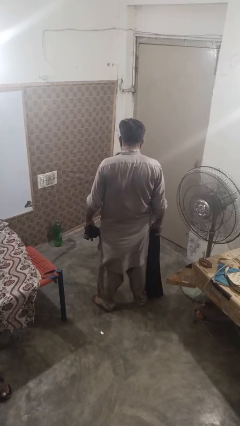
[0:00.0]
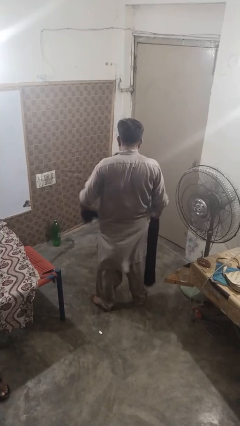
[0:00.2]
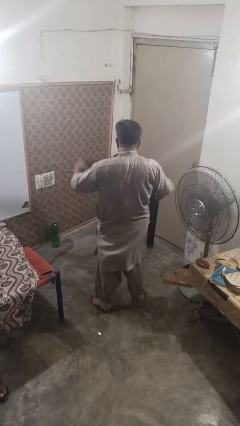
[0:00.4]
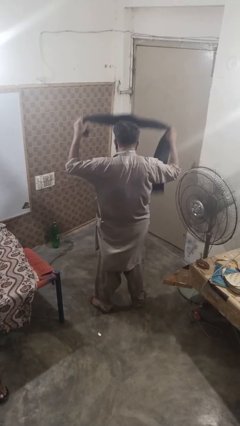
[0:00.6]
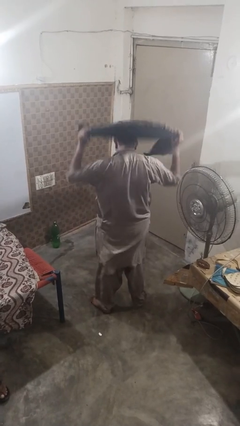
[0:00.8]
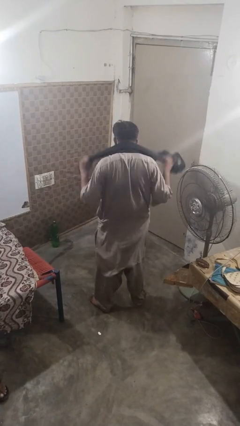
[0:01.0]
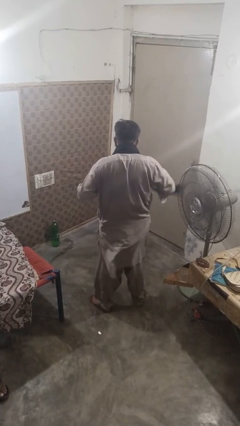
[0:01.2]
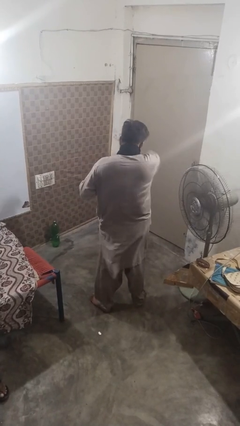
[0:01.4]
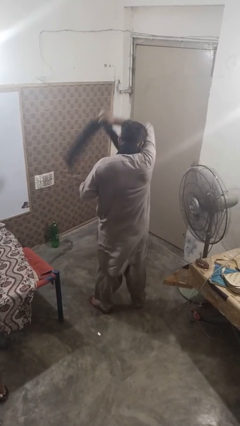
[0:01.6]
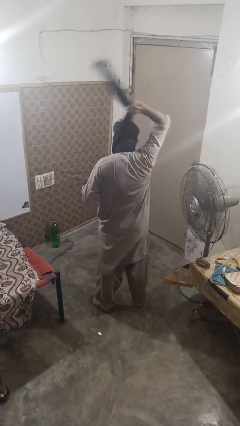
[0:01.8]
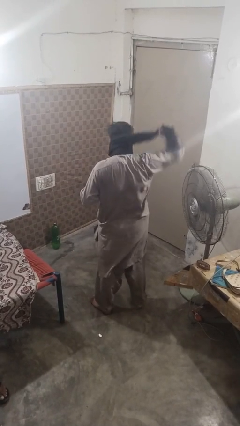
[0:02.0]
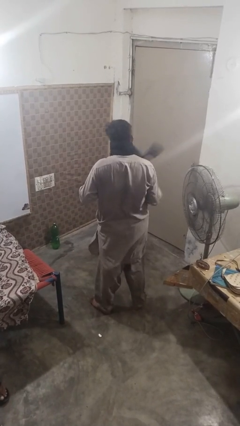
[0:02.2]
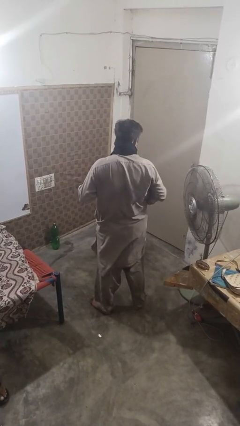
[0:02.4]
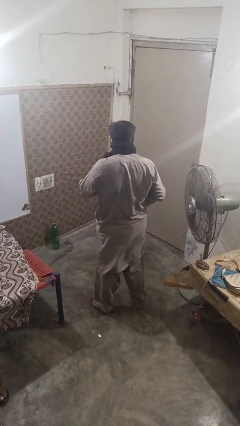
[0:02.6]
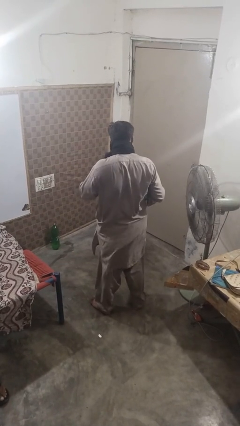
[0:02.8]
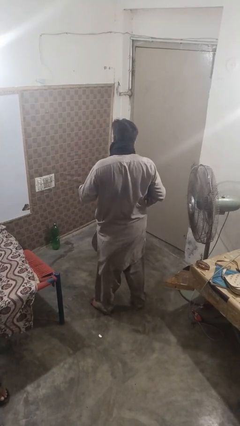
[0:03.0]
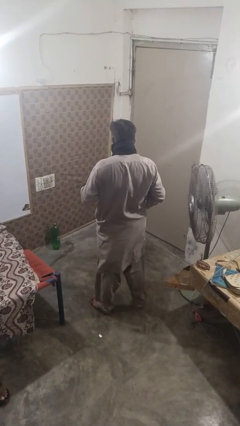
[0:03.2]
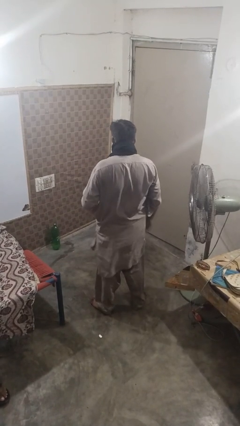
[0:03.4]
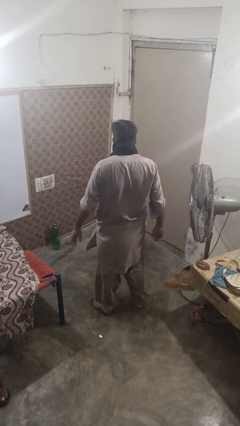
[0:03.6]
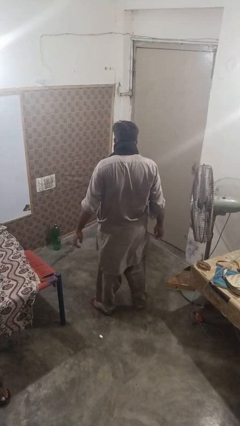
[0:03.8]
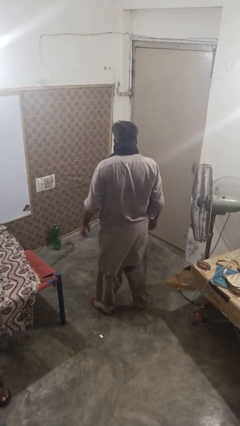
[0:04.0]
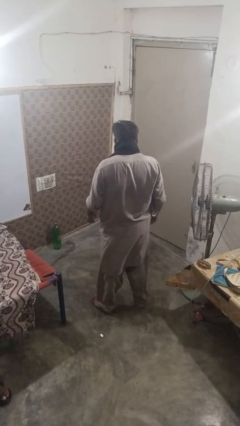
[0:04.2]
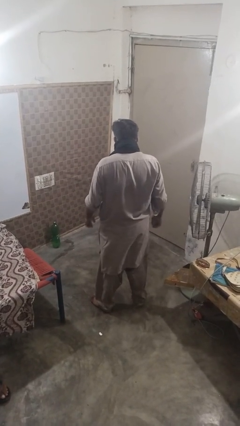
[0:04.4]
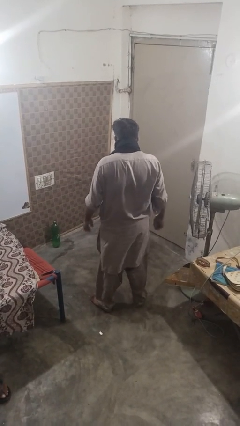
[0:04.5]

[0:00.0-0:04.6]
person puts on scarf

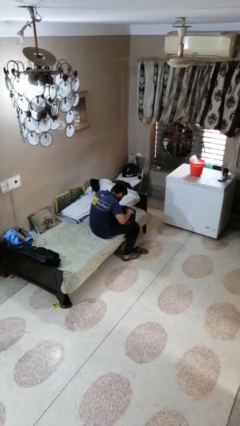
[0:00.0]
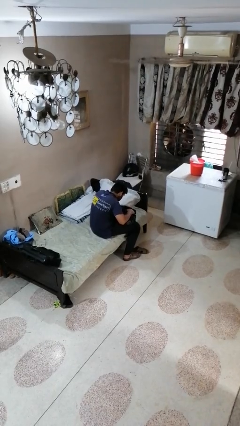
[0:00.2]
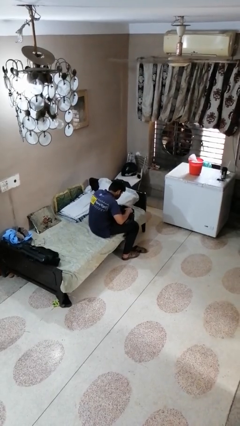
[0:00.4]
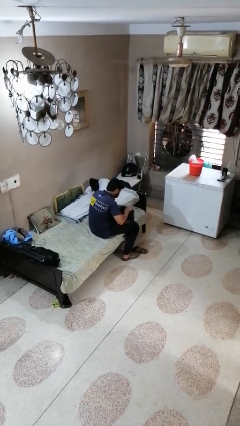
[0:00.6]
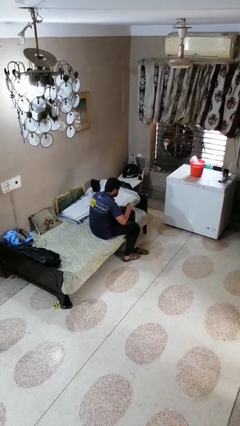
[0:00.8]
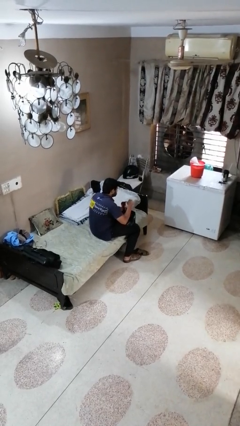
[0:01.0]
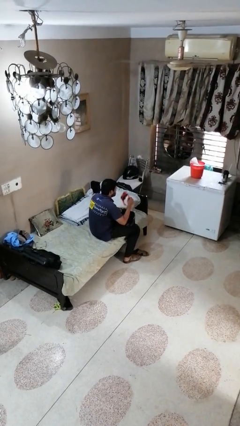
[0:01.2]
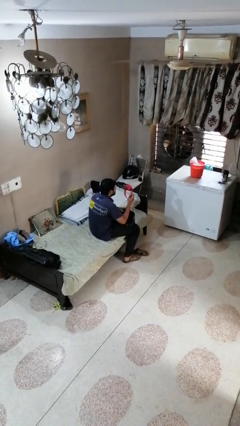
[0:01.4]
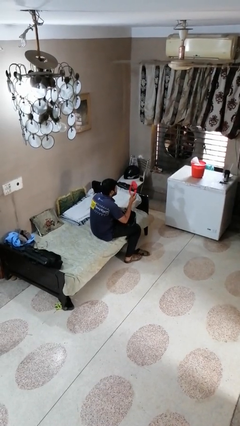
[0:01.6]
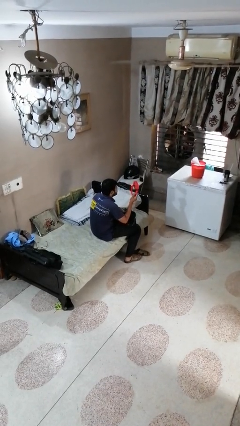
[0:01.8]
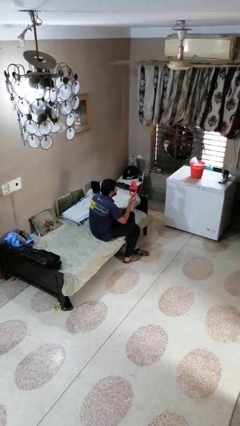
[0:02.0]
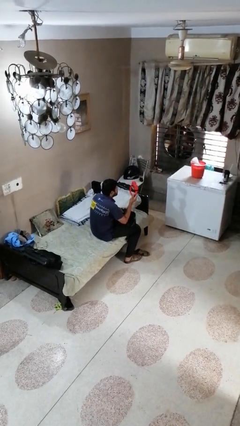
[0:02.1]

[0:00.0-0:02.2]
person takes object from purse

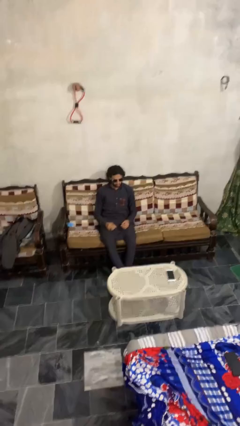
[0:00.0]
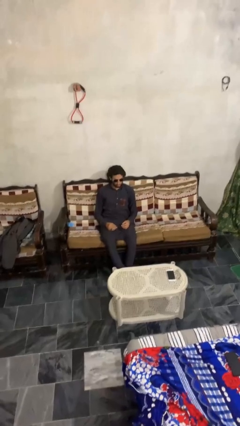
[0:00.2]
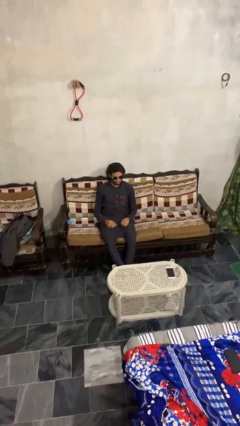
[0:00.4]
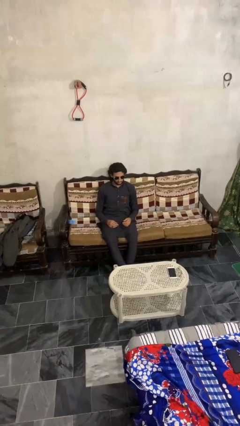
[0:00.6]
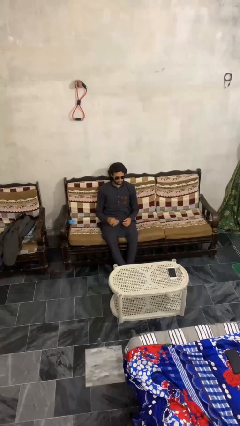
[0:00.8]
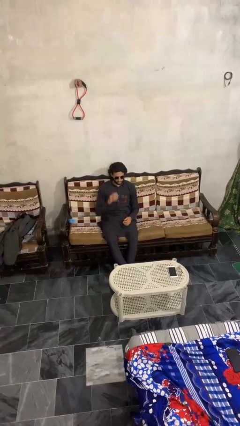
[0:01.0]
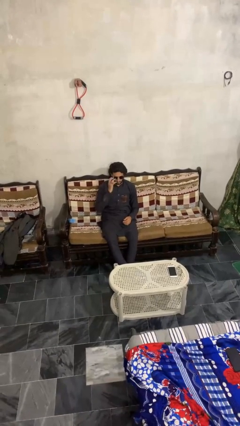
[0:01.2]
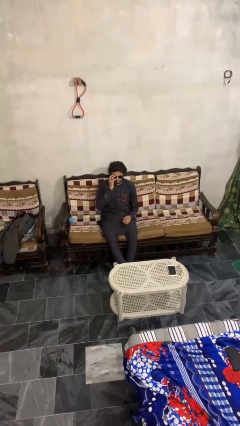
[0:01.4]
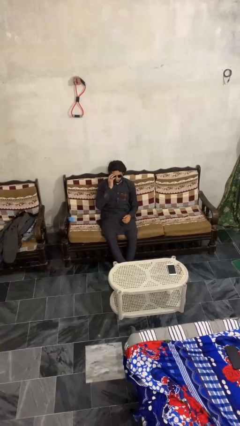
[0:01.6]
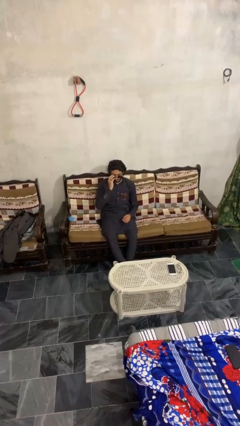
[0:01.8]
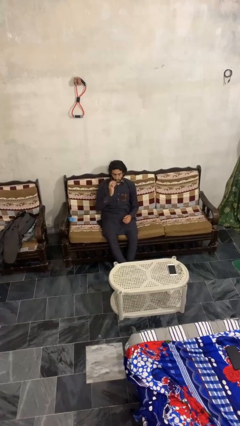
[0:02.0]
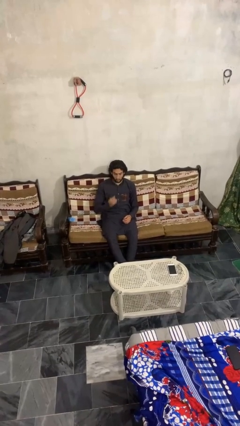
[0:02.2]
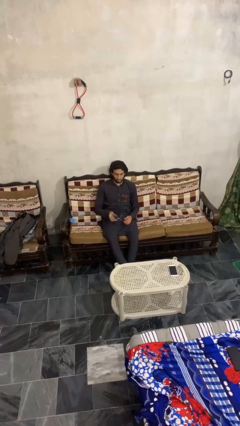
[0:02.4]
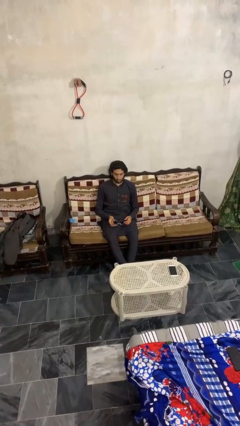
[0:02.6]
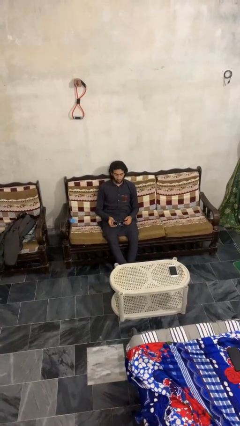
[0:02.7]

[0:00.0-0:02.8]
person takes off sunglasses

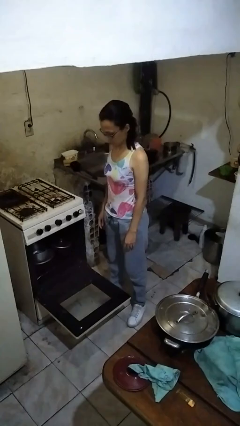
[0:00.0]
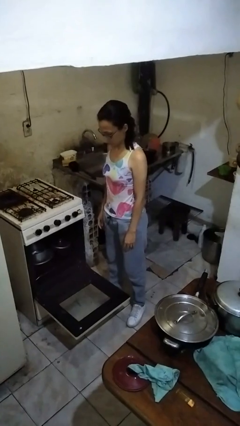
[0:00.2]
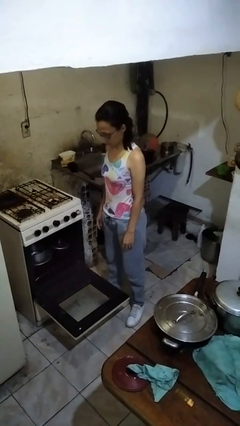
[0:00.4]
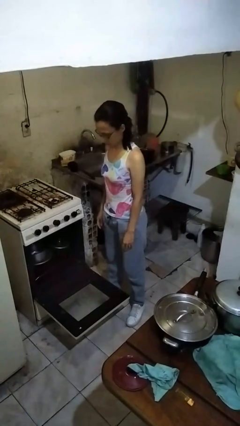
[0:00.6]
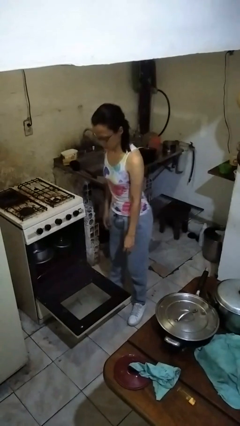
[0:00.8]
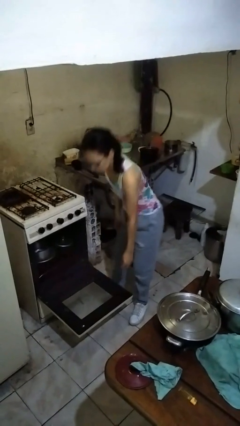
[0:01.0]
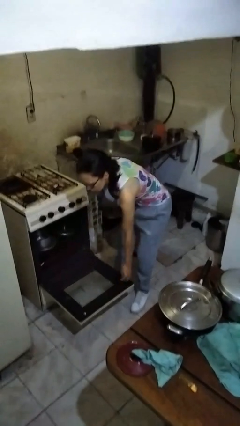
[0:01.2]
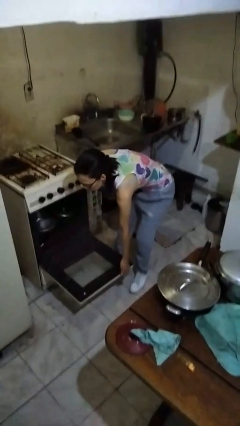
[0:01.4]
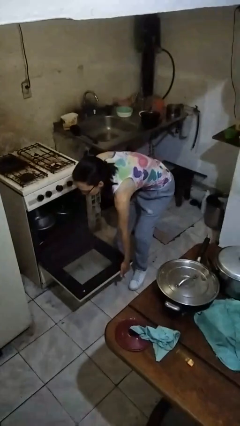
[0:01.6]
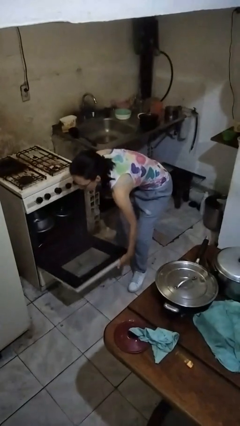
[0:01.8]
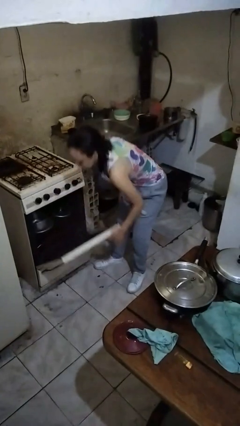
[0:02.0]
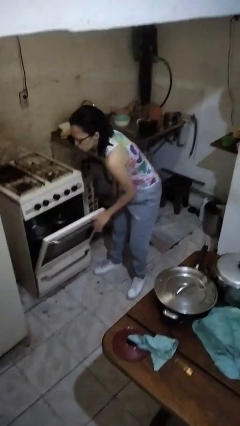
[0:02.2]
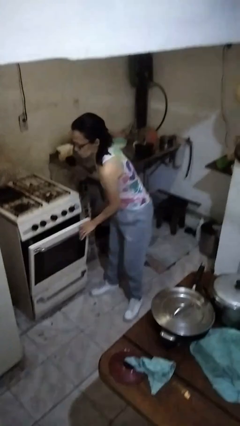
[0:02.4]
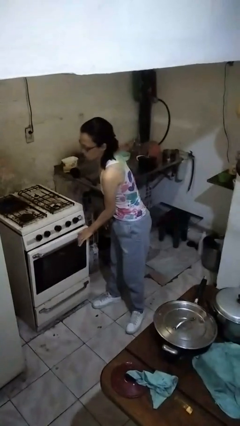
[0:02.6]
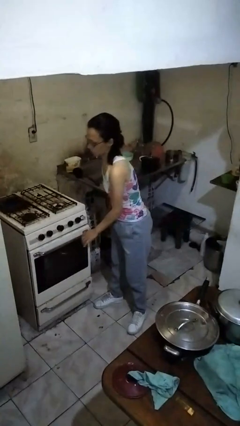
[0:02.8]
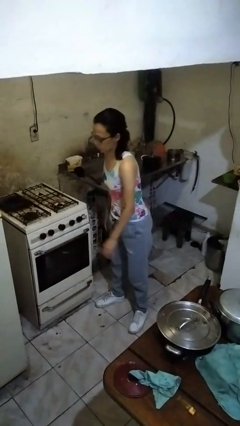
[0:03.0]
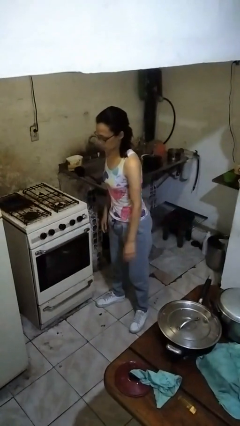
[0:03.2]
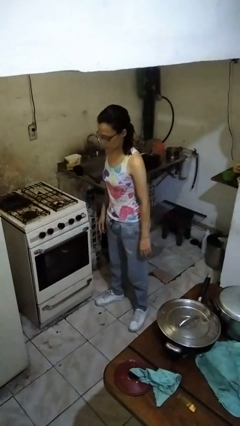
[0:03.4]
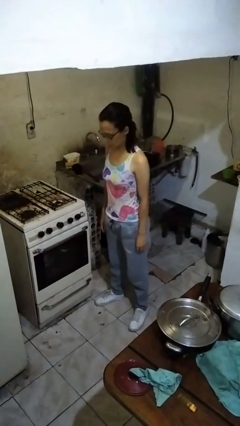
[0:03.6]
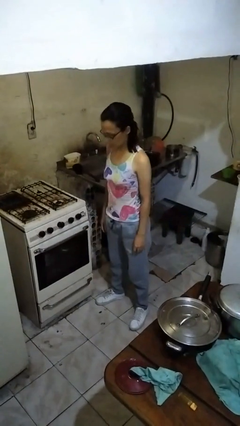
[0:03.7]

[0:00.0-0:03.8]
person closes oven door

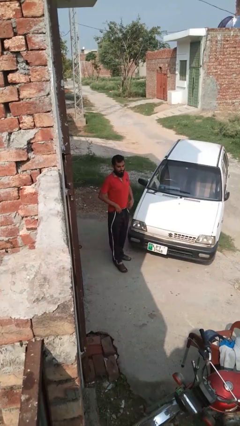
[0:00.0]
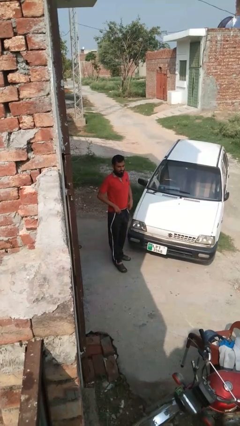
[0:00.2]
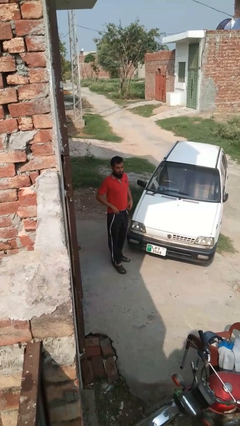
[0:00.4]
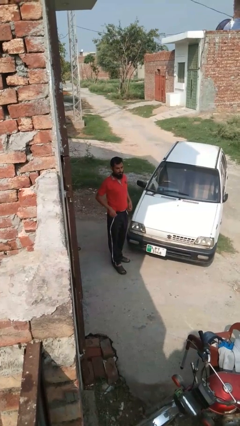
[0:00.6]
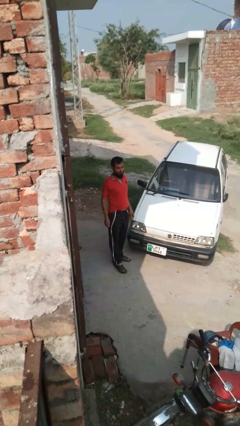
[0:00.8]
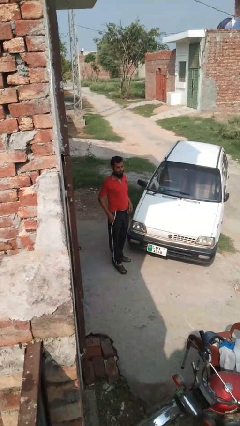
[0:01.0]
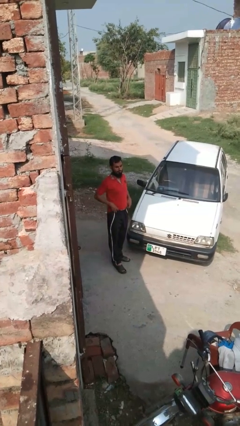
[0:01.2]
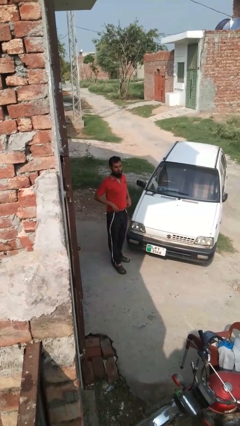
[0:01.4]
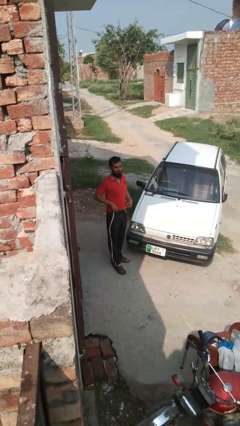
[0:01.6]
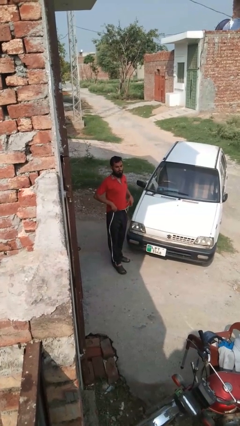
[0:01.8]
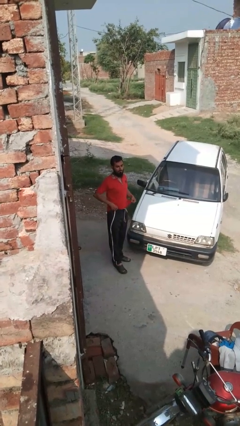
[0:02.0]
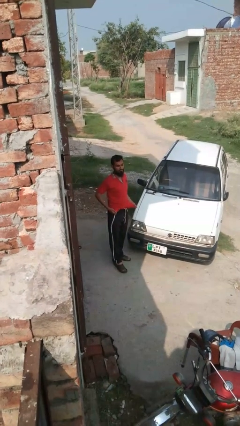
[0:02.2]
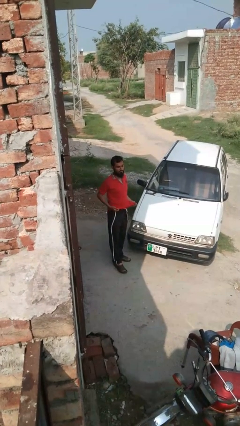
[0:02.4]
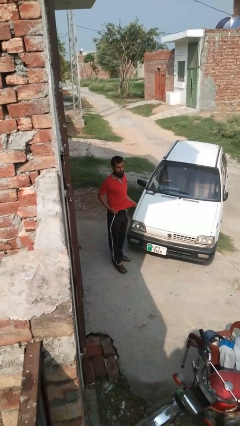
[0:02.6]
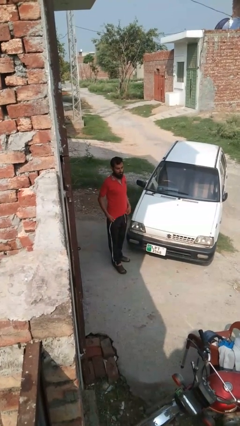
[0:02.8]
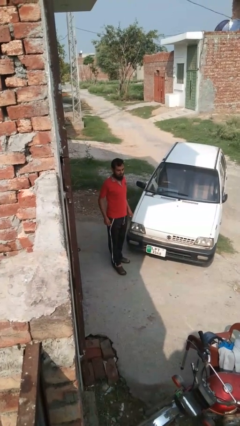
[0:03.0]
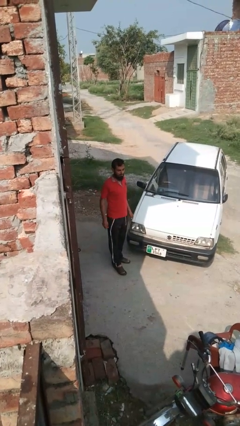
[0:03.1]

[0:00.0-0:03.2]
person untucks shirt

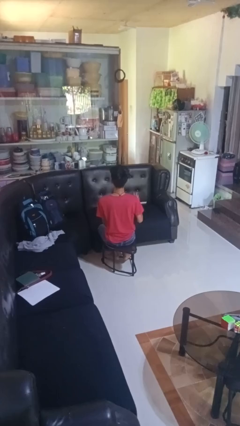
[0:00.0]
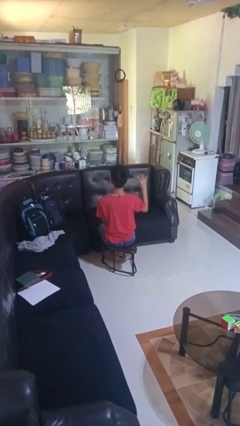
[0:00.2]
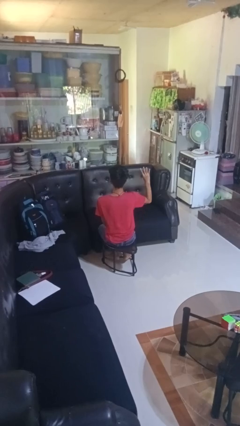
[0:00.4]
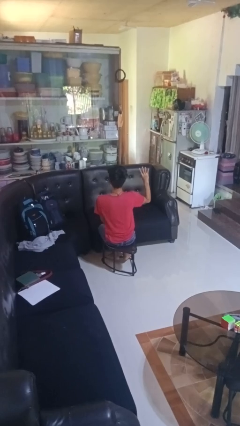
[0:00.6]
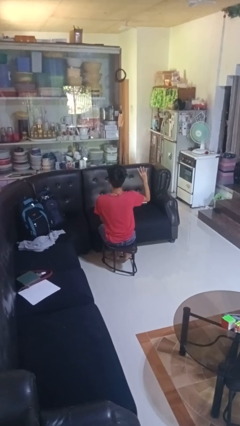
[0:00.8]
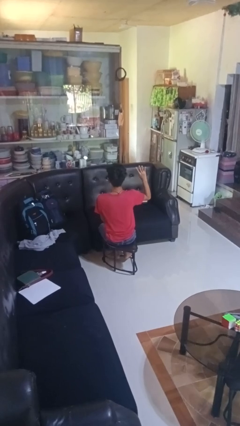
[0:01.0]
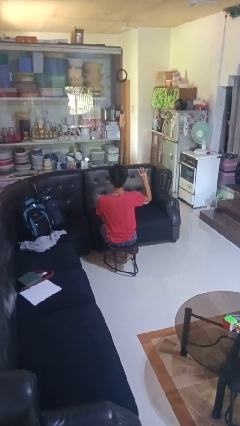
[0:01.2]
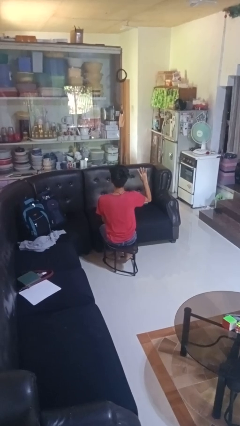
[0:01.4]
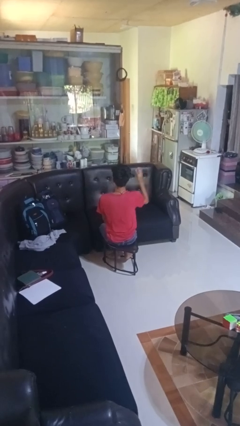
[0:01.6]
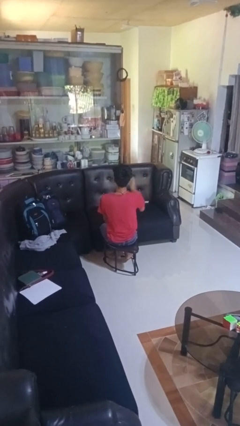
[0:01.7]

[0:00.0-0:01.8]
person gestures number four
